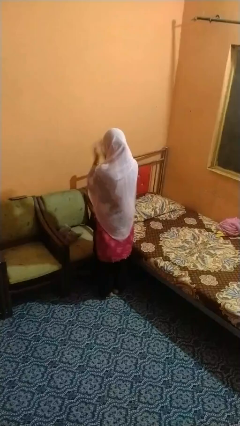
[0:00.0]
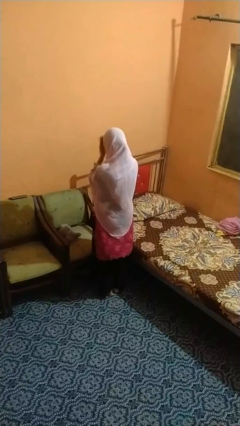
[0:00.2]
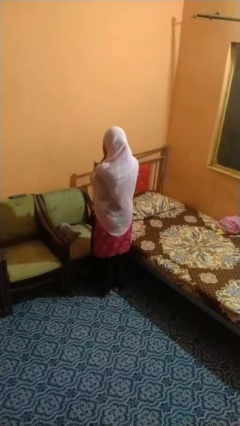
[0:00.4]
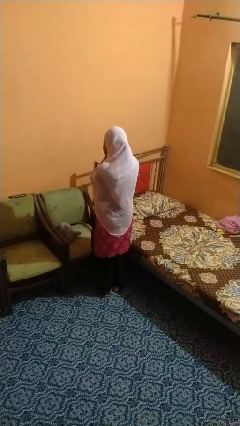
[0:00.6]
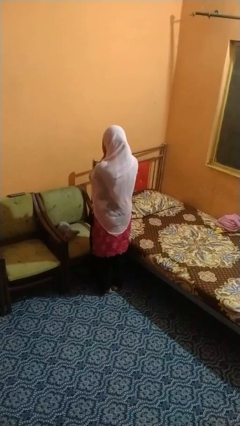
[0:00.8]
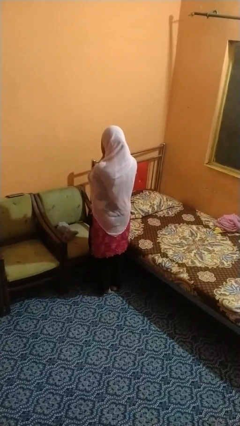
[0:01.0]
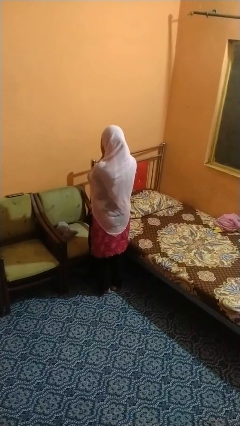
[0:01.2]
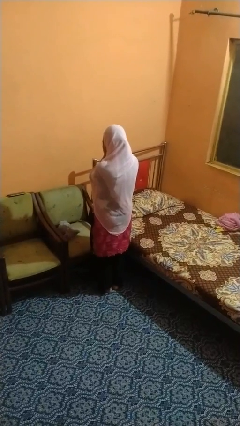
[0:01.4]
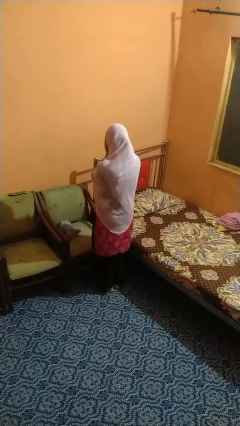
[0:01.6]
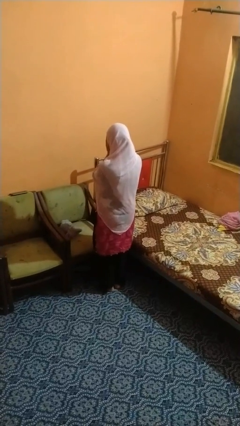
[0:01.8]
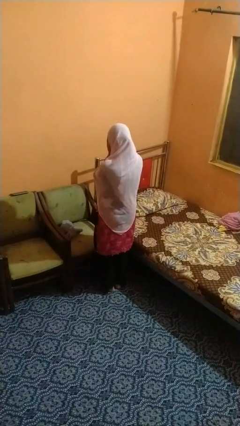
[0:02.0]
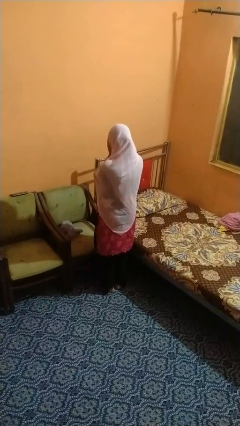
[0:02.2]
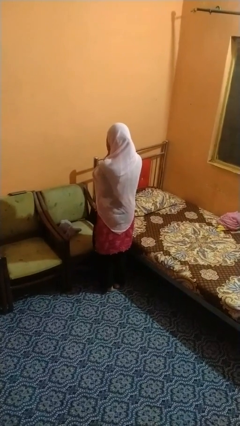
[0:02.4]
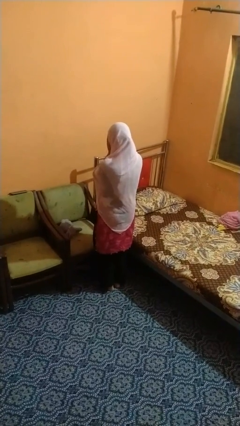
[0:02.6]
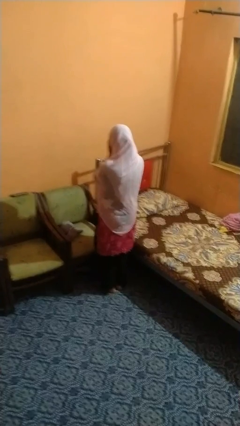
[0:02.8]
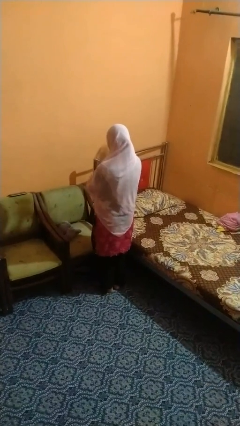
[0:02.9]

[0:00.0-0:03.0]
person covers face with hands

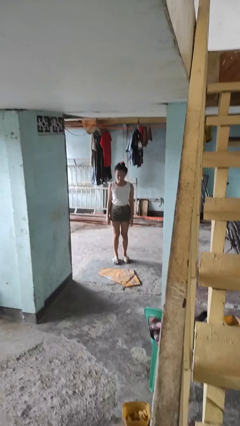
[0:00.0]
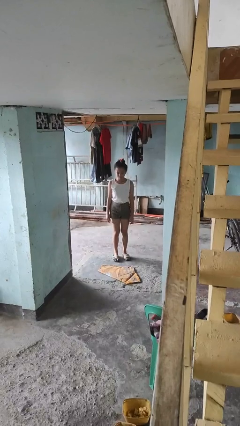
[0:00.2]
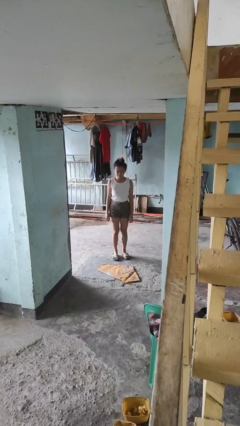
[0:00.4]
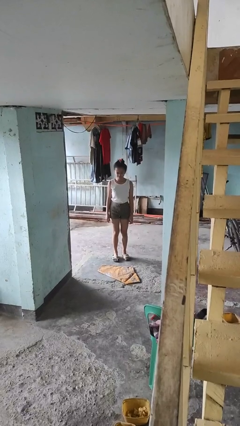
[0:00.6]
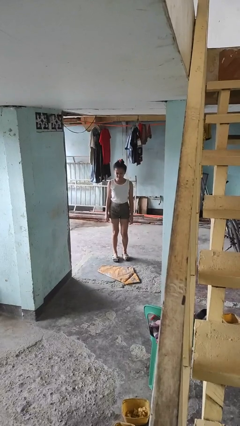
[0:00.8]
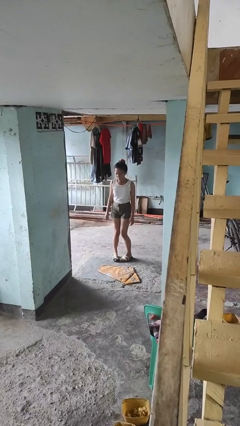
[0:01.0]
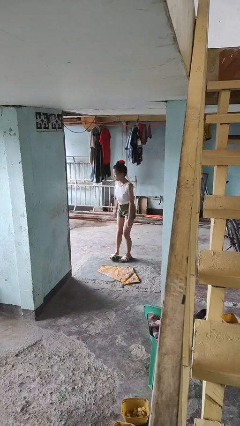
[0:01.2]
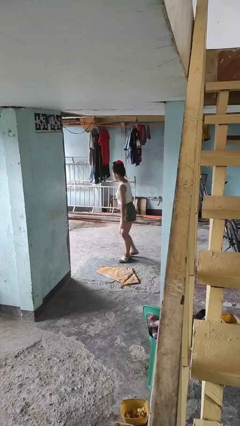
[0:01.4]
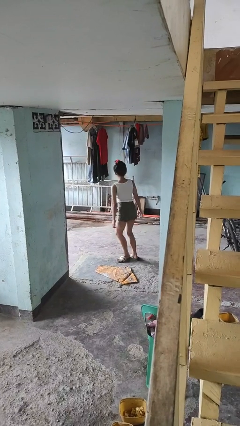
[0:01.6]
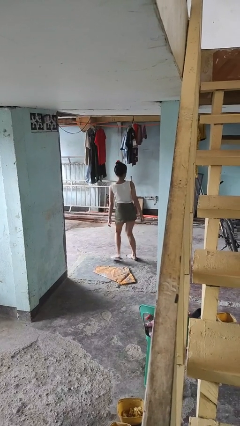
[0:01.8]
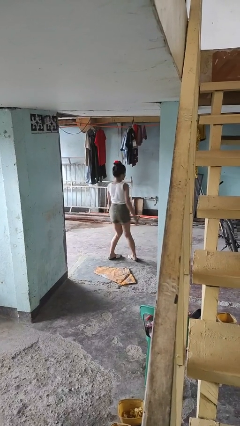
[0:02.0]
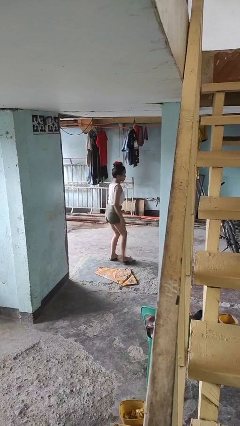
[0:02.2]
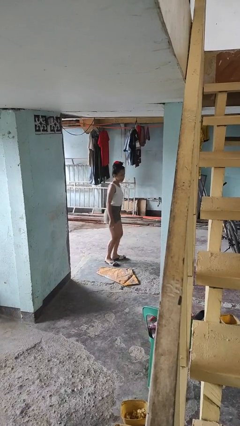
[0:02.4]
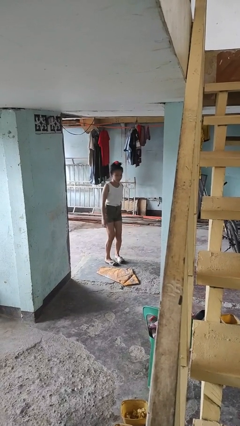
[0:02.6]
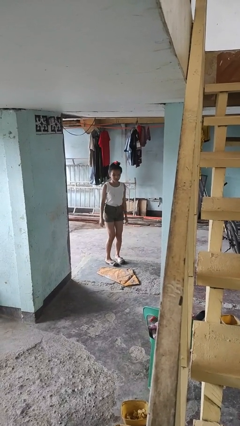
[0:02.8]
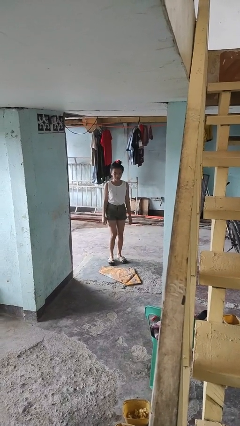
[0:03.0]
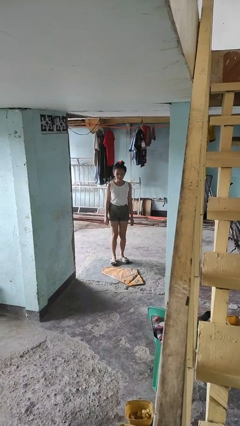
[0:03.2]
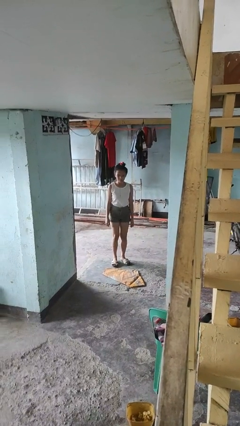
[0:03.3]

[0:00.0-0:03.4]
person twirls

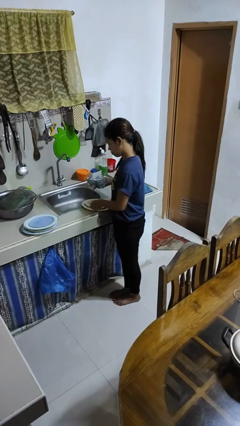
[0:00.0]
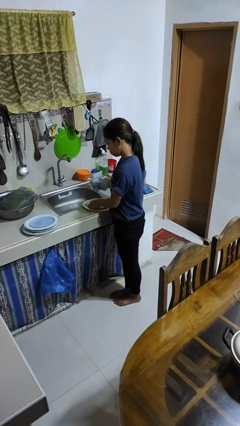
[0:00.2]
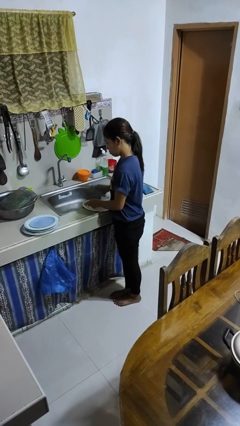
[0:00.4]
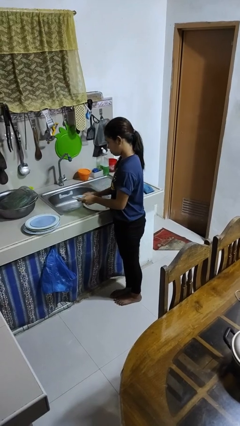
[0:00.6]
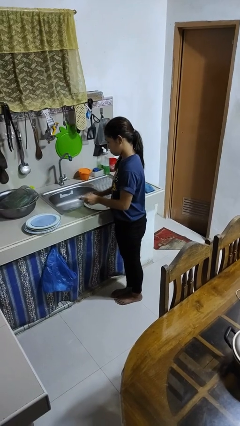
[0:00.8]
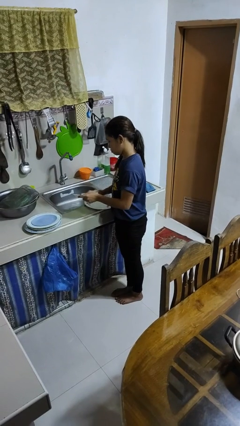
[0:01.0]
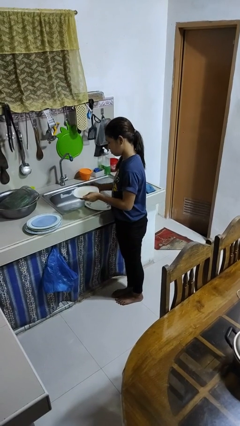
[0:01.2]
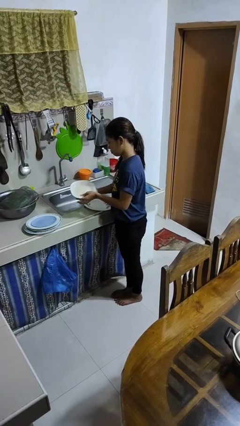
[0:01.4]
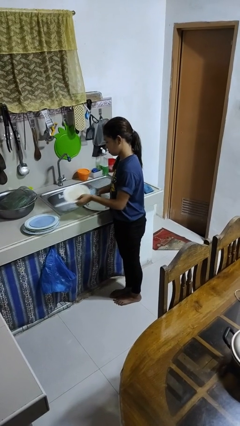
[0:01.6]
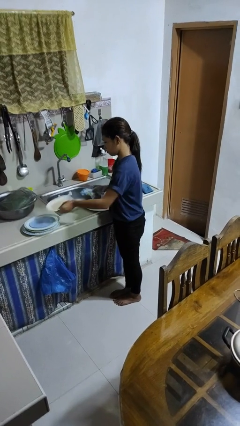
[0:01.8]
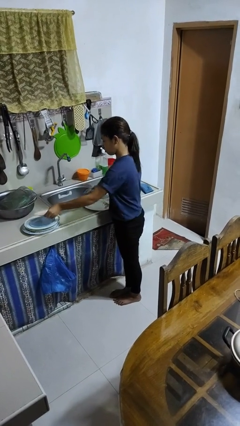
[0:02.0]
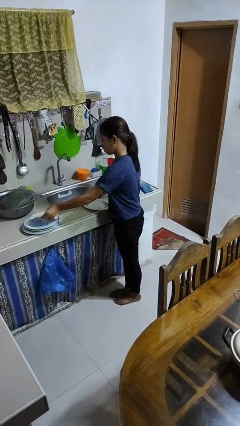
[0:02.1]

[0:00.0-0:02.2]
person dries dish

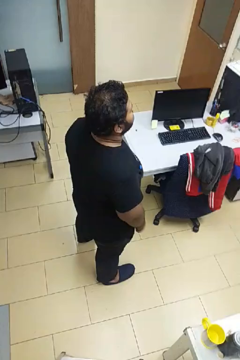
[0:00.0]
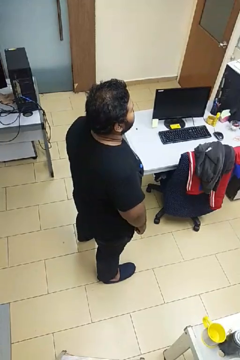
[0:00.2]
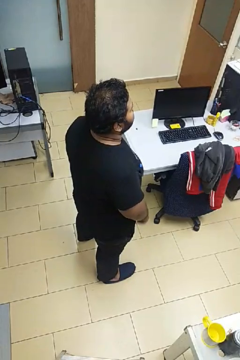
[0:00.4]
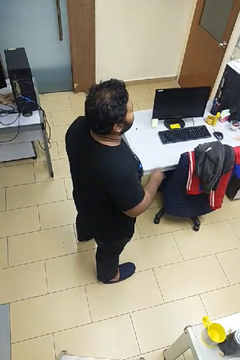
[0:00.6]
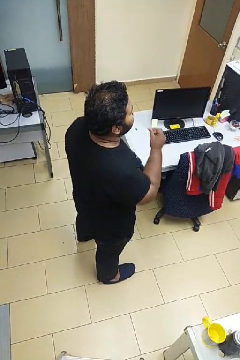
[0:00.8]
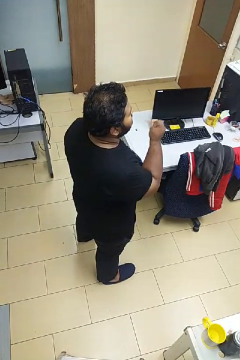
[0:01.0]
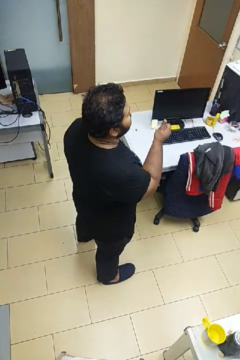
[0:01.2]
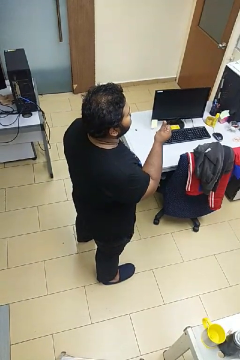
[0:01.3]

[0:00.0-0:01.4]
person snaps fingers

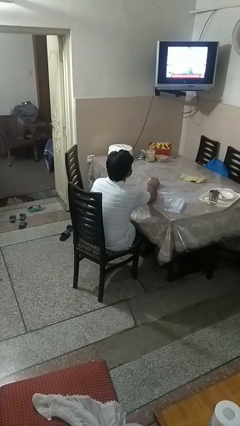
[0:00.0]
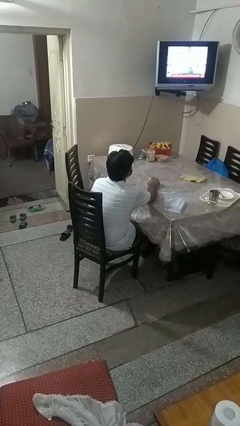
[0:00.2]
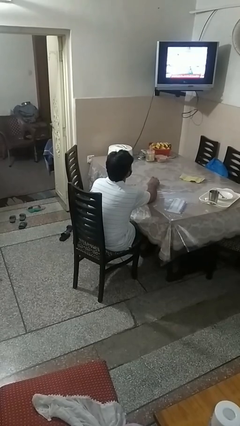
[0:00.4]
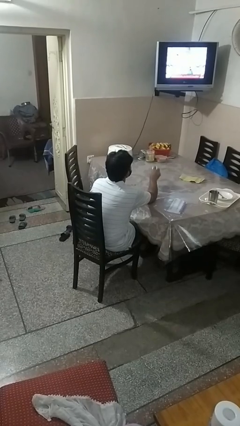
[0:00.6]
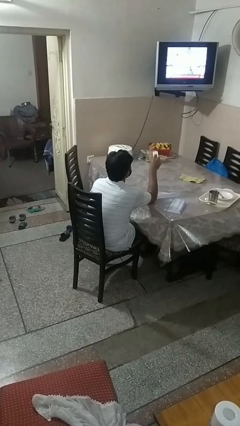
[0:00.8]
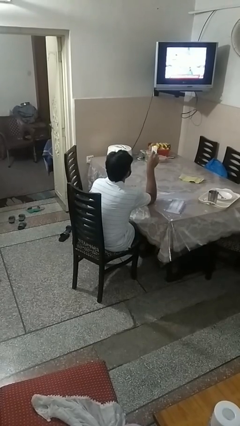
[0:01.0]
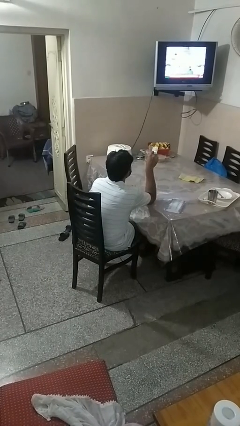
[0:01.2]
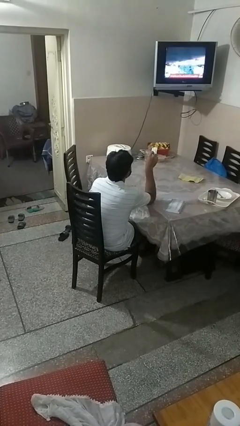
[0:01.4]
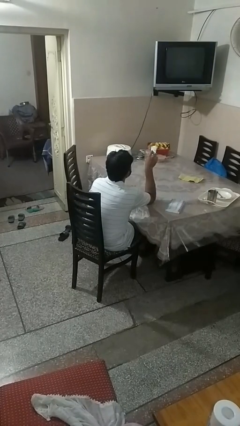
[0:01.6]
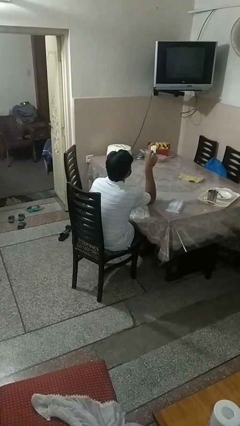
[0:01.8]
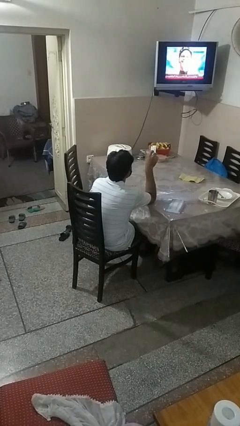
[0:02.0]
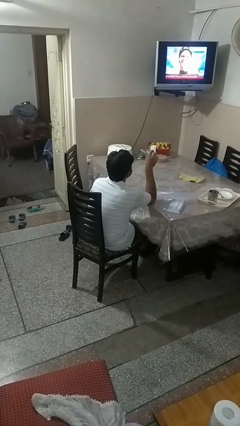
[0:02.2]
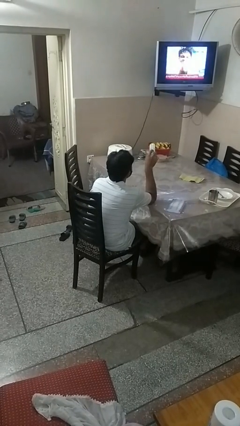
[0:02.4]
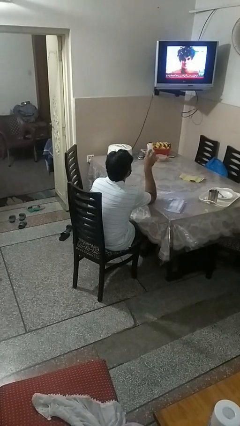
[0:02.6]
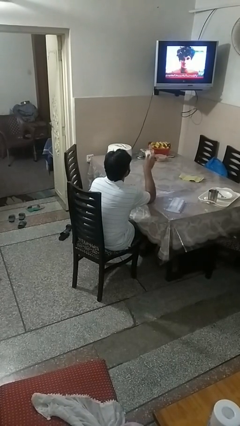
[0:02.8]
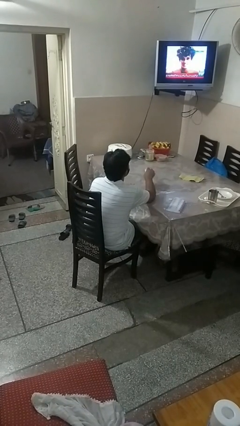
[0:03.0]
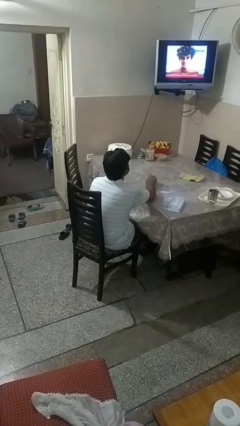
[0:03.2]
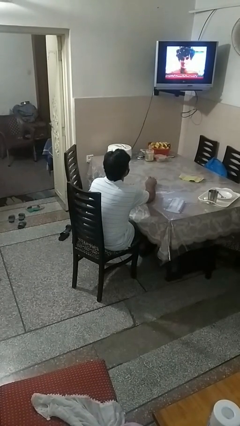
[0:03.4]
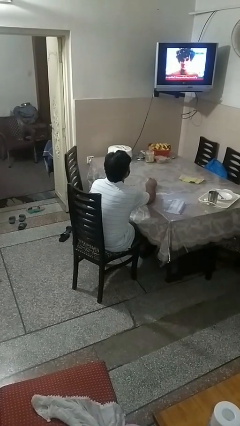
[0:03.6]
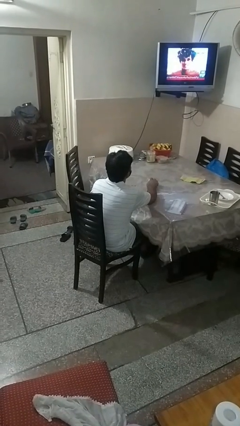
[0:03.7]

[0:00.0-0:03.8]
person uses television remote

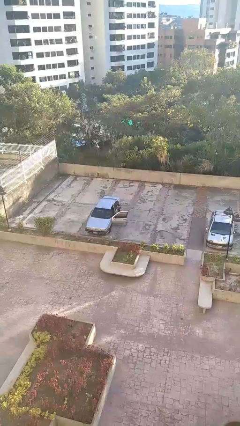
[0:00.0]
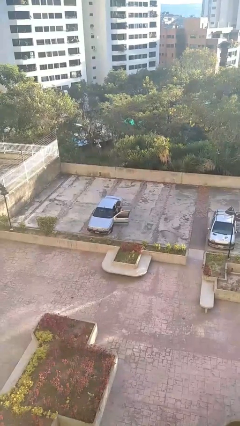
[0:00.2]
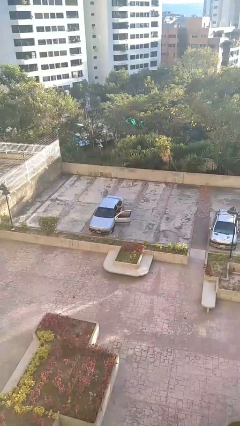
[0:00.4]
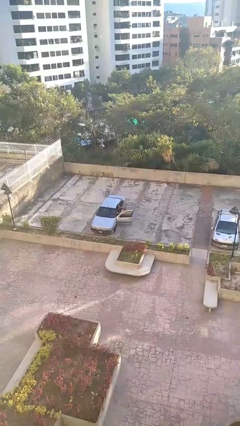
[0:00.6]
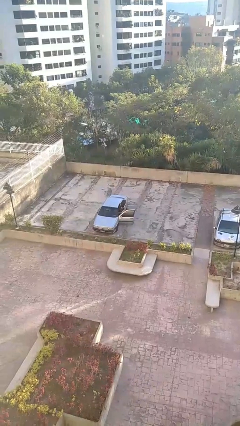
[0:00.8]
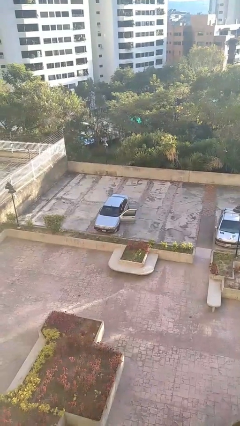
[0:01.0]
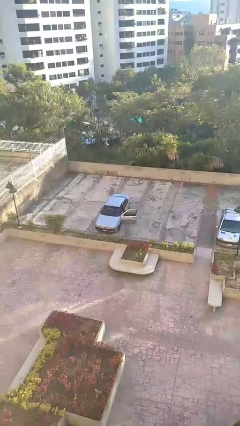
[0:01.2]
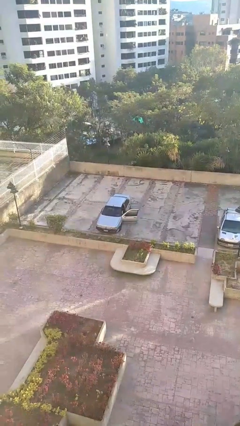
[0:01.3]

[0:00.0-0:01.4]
person enters car

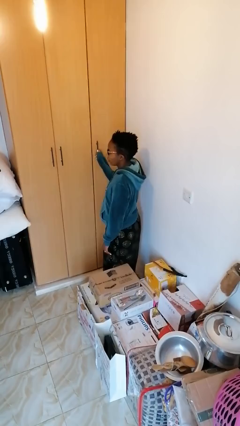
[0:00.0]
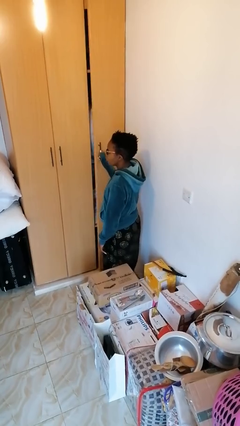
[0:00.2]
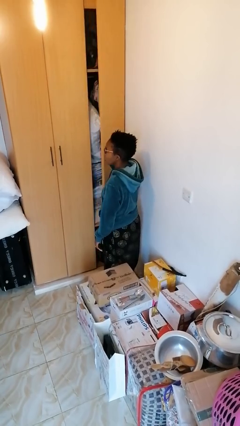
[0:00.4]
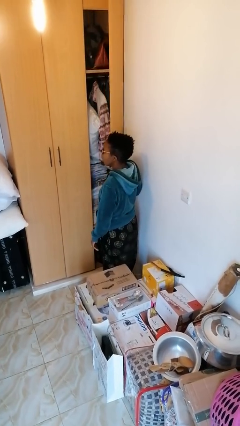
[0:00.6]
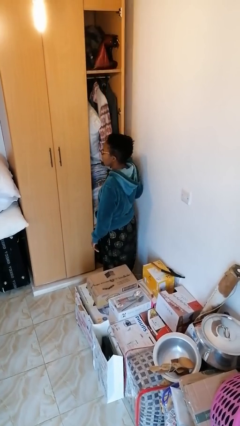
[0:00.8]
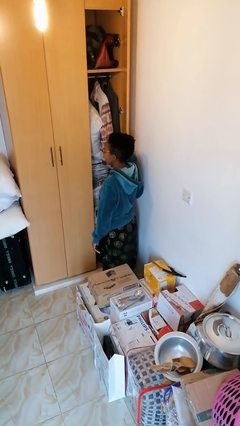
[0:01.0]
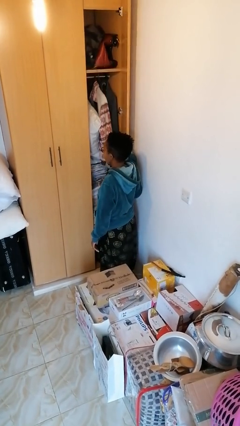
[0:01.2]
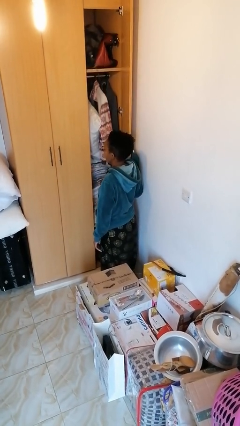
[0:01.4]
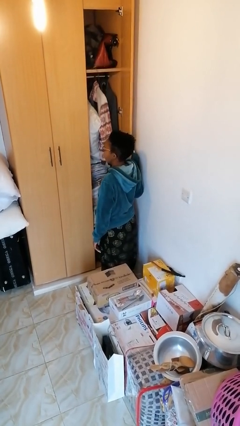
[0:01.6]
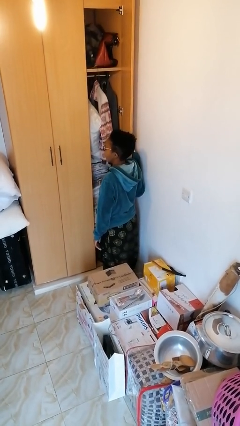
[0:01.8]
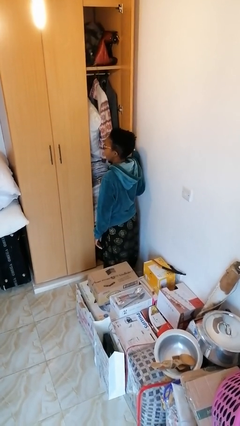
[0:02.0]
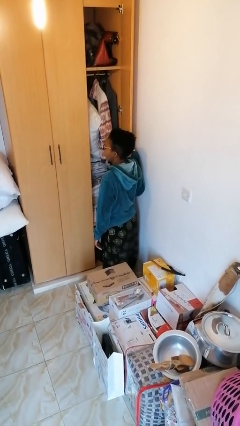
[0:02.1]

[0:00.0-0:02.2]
person opens closet door

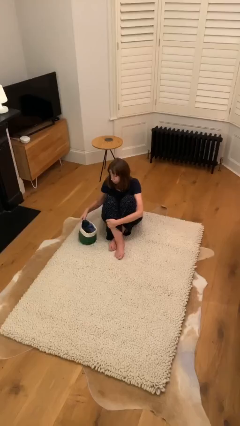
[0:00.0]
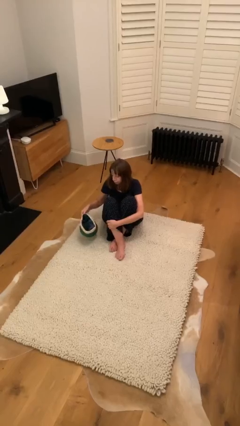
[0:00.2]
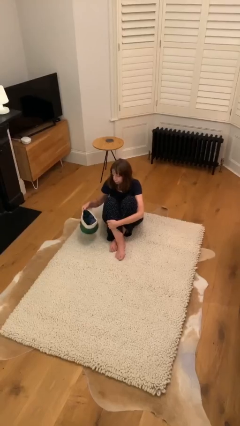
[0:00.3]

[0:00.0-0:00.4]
person picks up object from floor
